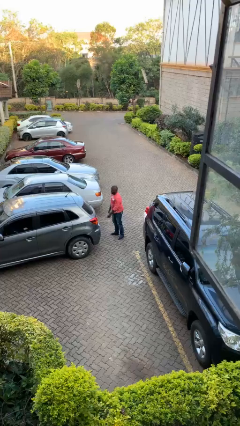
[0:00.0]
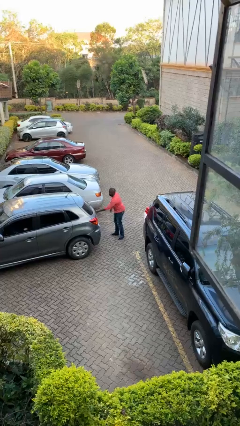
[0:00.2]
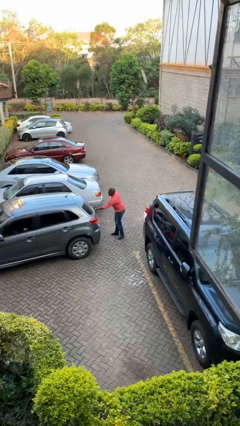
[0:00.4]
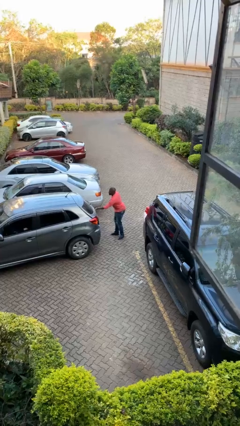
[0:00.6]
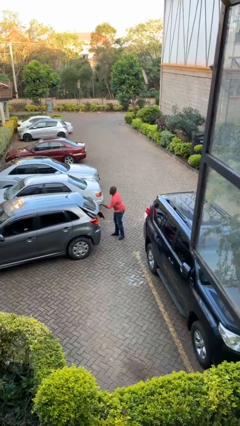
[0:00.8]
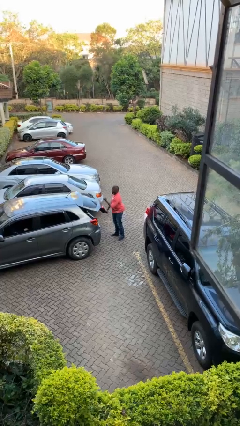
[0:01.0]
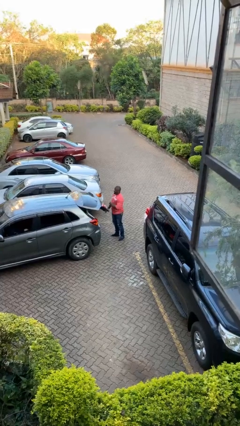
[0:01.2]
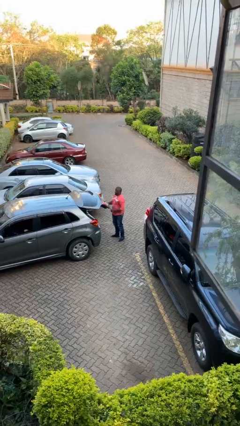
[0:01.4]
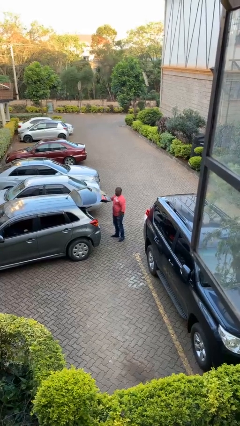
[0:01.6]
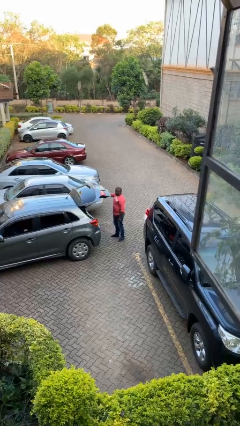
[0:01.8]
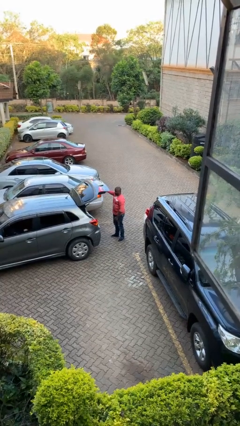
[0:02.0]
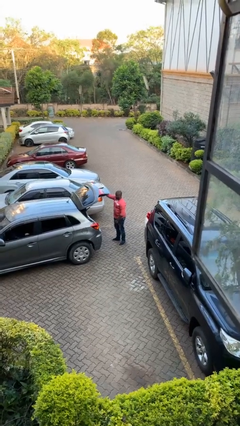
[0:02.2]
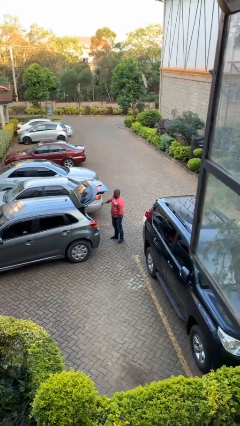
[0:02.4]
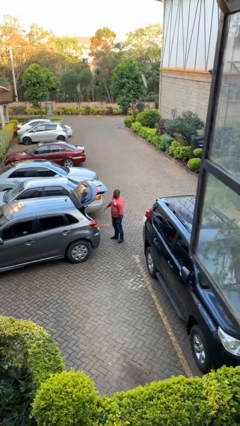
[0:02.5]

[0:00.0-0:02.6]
person opens car trunk

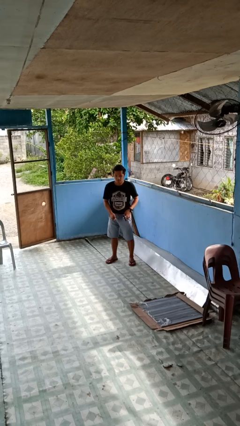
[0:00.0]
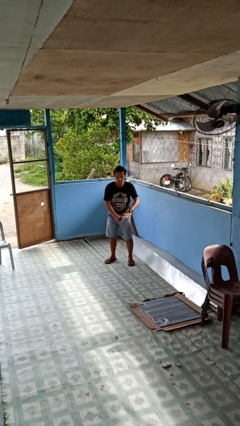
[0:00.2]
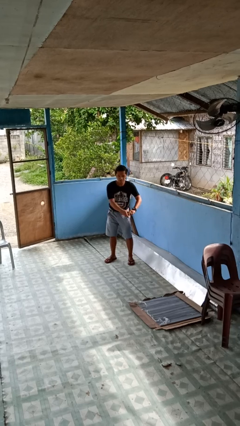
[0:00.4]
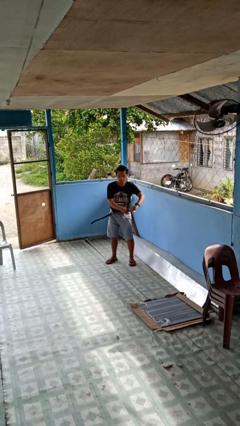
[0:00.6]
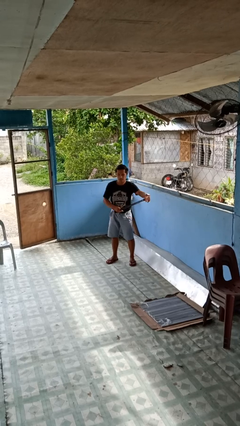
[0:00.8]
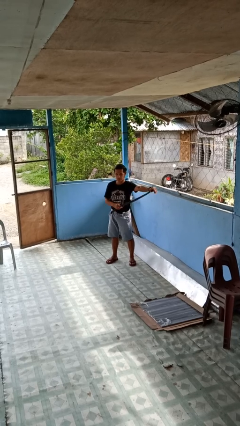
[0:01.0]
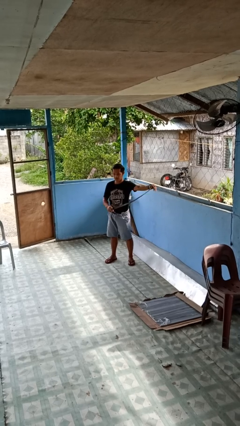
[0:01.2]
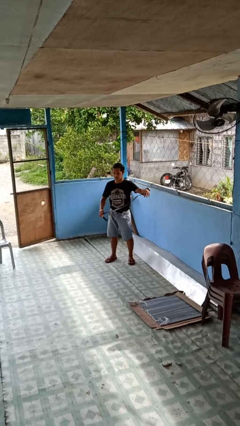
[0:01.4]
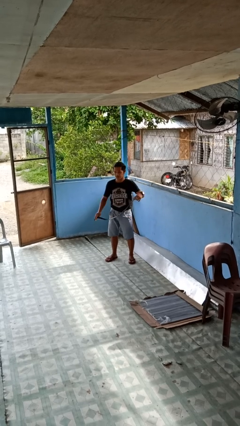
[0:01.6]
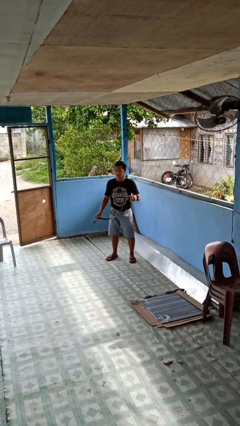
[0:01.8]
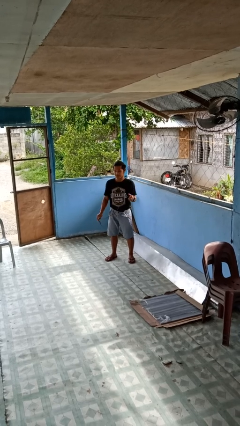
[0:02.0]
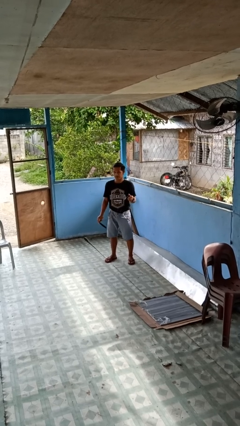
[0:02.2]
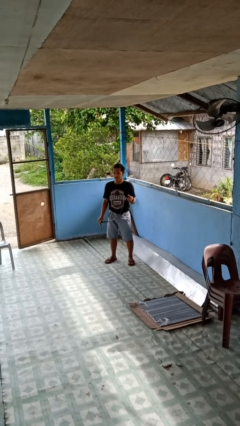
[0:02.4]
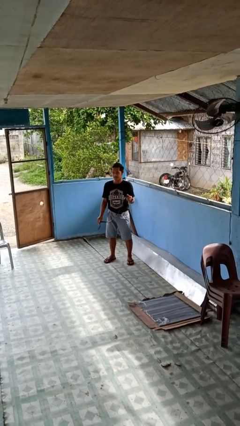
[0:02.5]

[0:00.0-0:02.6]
person takes off belt

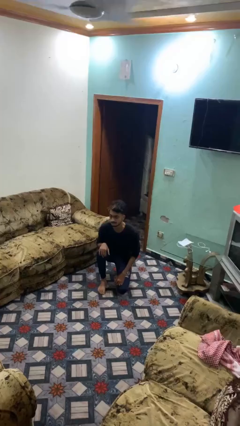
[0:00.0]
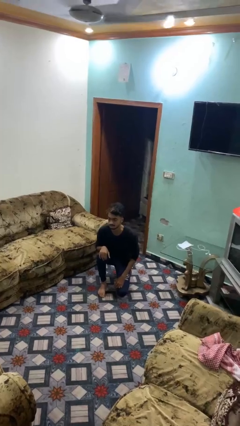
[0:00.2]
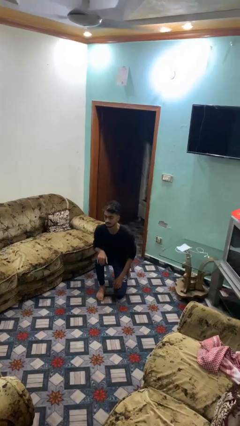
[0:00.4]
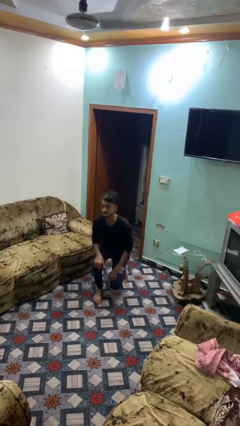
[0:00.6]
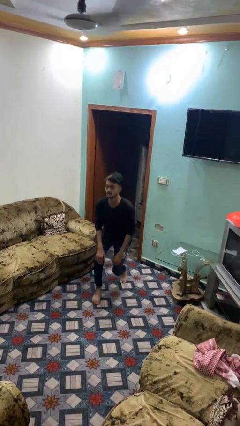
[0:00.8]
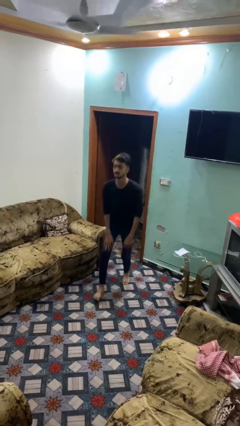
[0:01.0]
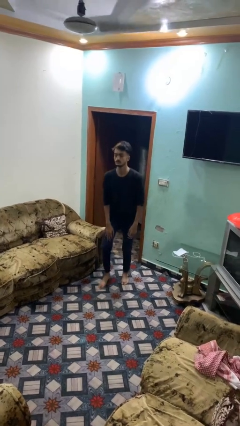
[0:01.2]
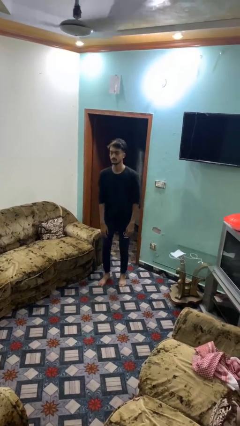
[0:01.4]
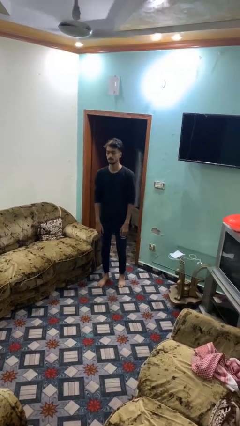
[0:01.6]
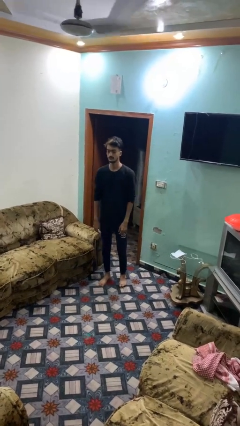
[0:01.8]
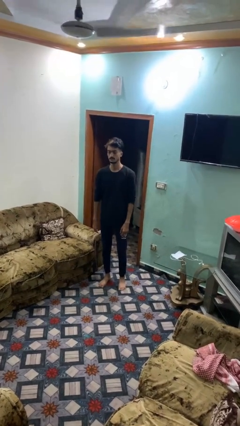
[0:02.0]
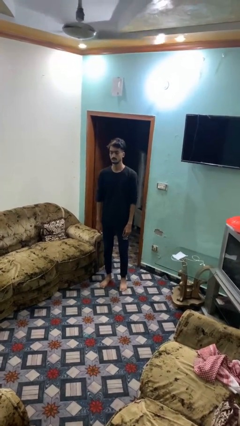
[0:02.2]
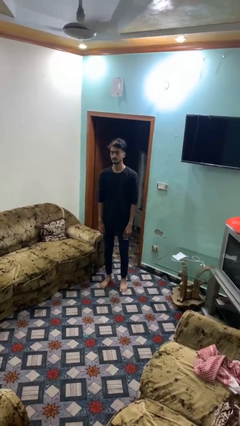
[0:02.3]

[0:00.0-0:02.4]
person stands up from floor

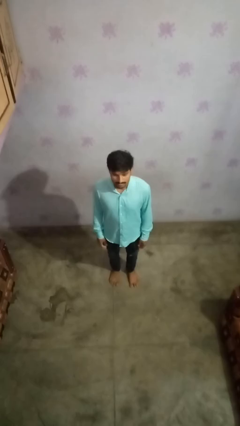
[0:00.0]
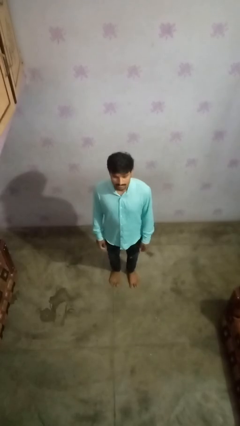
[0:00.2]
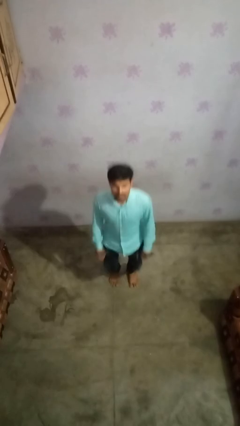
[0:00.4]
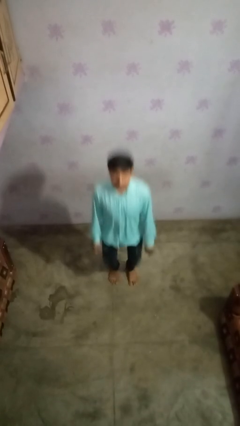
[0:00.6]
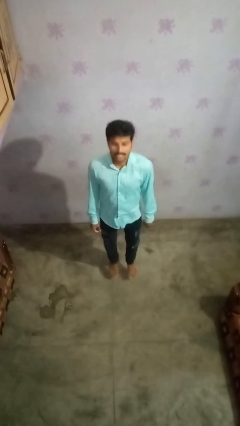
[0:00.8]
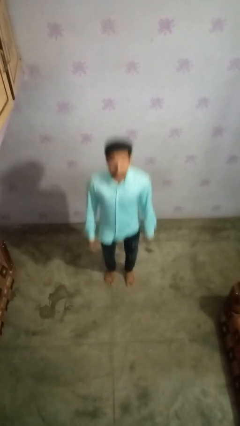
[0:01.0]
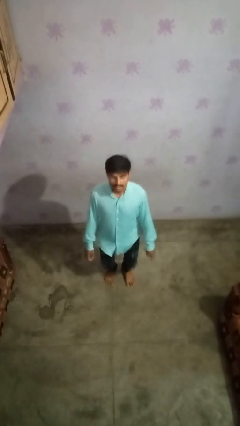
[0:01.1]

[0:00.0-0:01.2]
person jumps

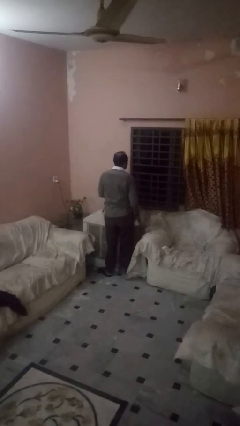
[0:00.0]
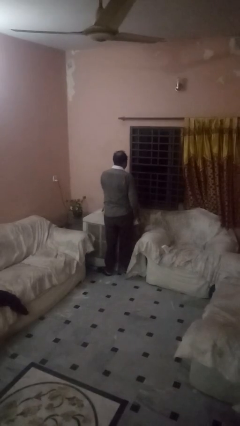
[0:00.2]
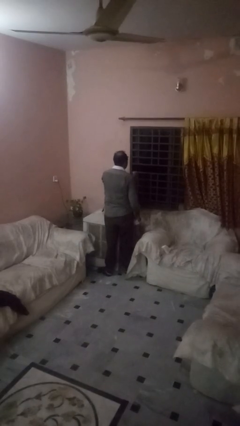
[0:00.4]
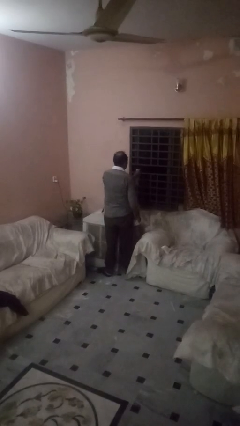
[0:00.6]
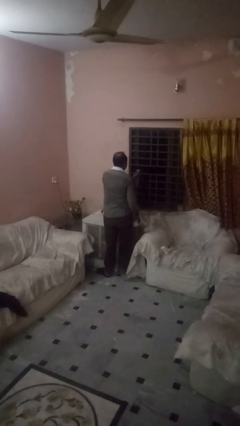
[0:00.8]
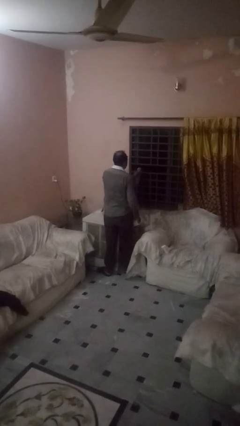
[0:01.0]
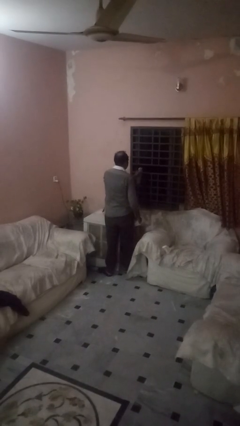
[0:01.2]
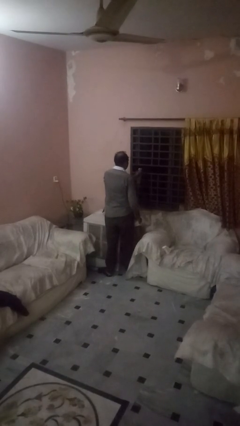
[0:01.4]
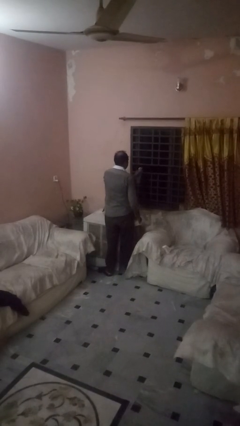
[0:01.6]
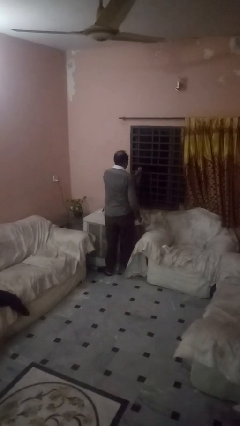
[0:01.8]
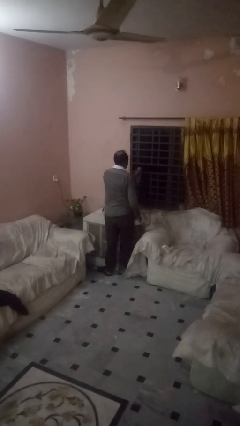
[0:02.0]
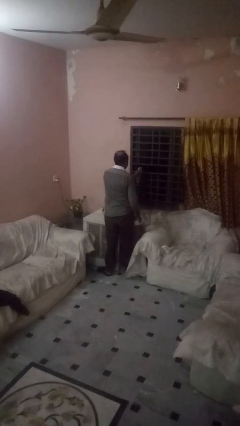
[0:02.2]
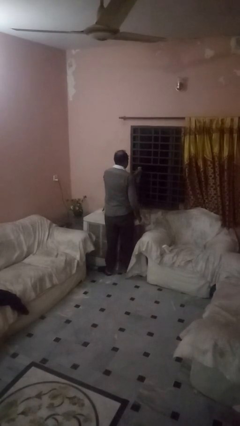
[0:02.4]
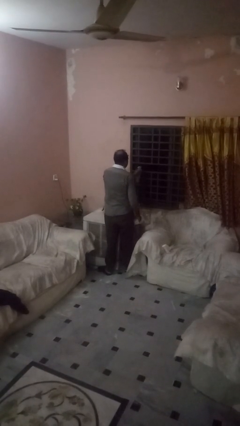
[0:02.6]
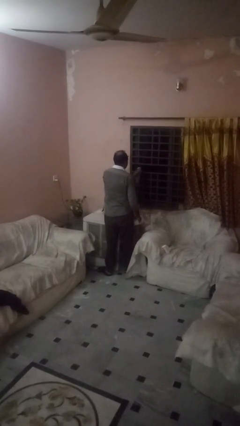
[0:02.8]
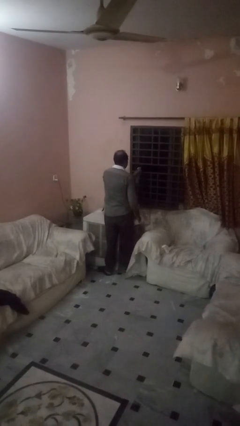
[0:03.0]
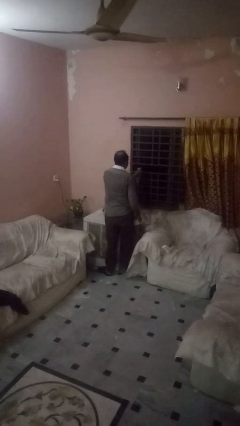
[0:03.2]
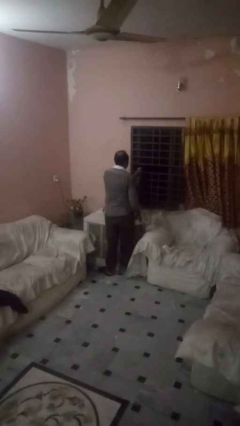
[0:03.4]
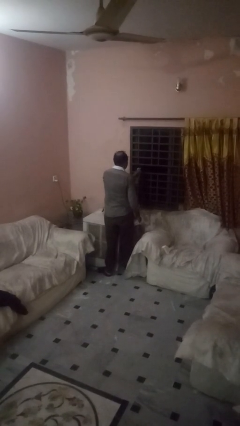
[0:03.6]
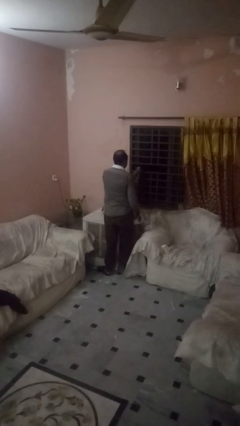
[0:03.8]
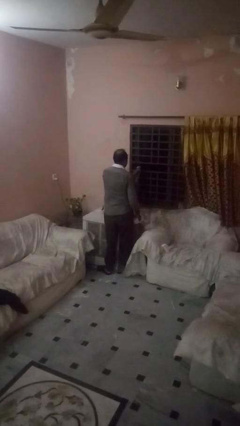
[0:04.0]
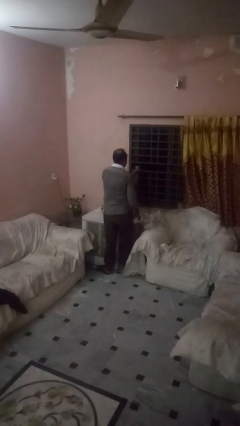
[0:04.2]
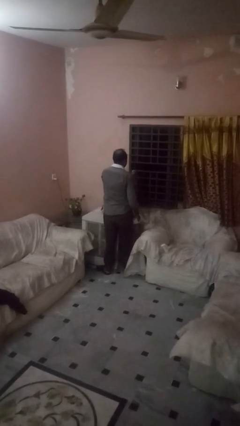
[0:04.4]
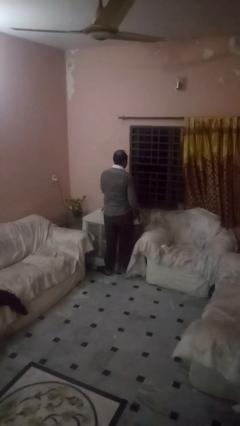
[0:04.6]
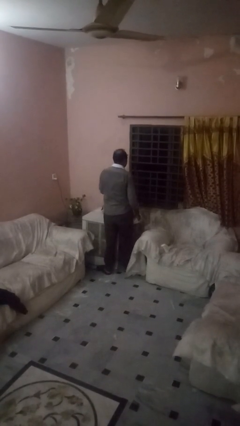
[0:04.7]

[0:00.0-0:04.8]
person sprays from bottle

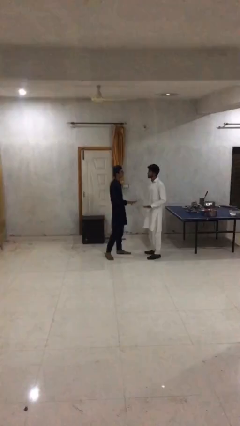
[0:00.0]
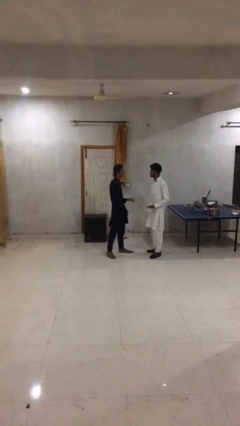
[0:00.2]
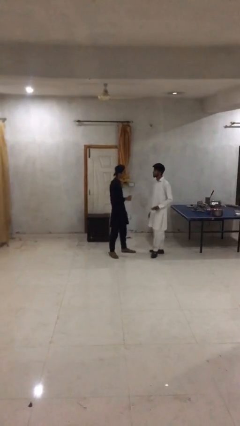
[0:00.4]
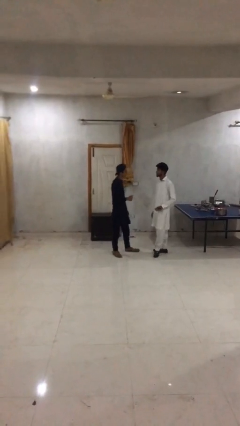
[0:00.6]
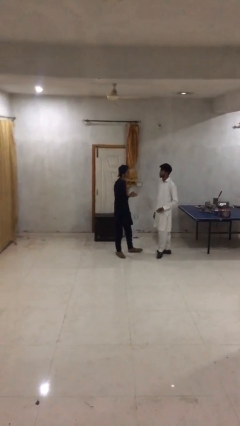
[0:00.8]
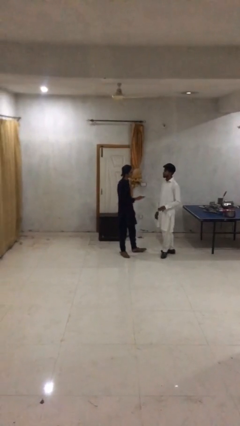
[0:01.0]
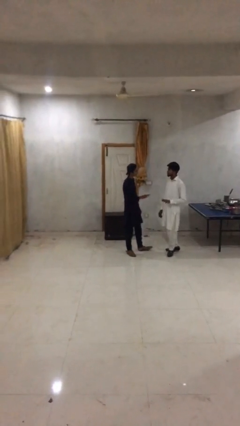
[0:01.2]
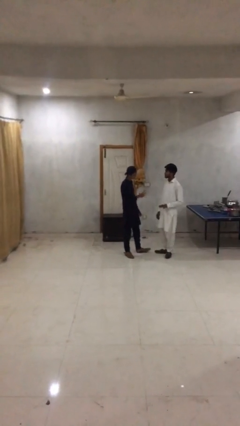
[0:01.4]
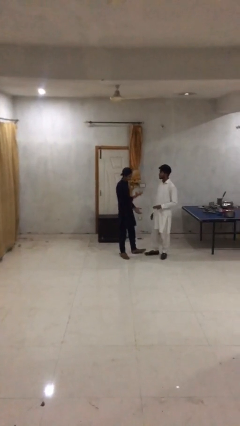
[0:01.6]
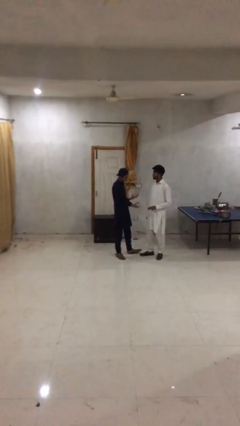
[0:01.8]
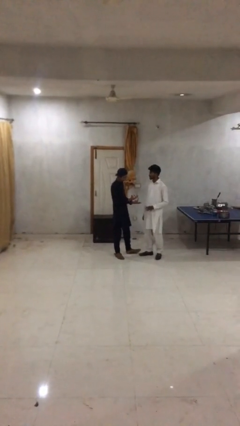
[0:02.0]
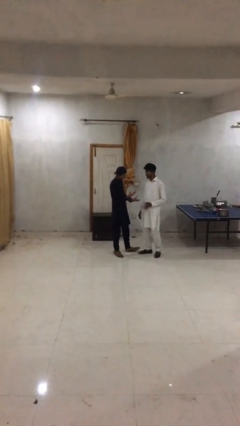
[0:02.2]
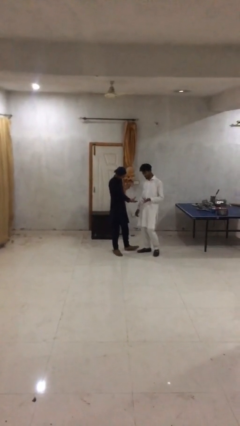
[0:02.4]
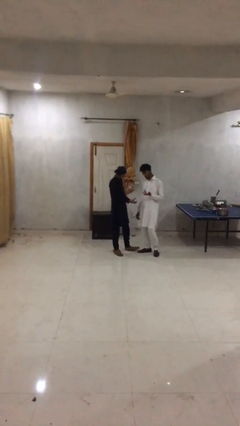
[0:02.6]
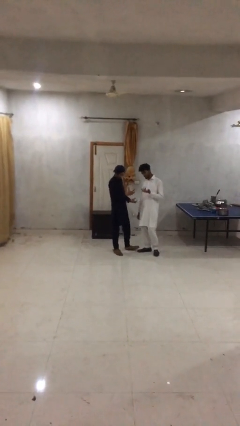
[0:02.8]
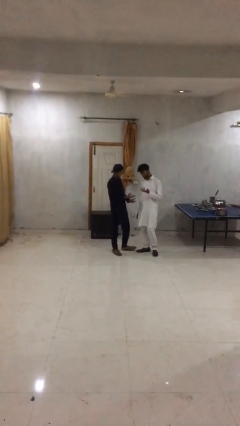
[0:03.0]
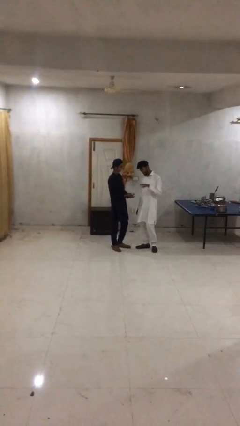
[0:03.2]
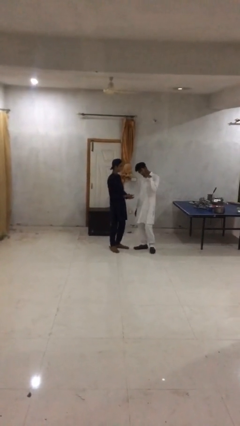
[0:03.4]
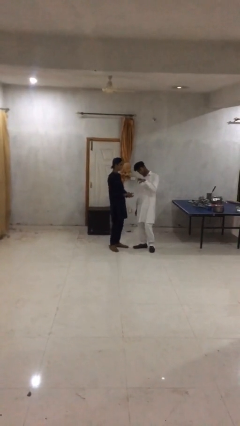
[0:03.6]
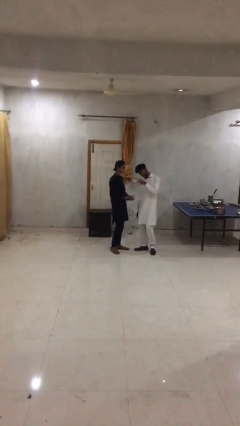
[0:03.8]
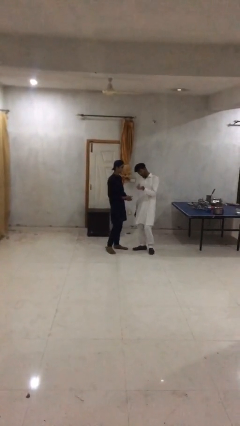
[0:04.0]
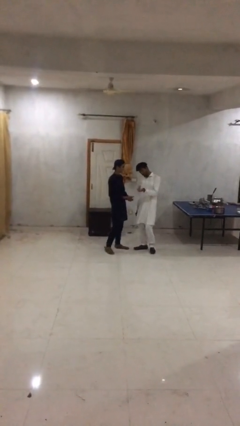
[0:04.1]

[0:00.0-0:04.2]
person talks to person
